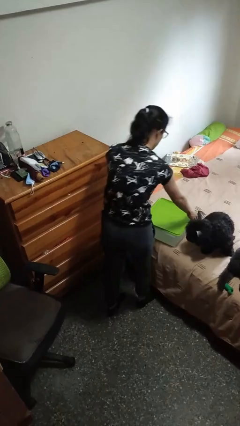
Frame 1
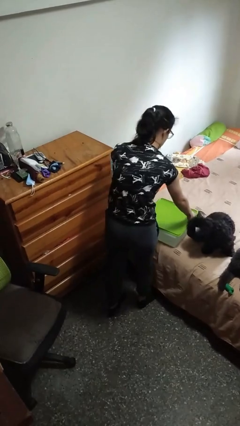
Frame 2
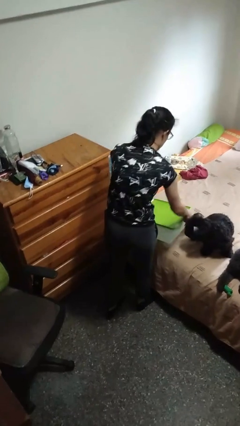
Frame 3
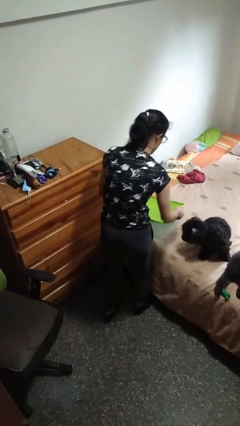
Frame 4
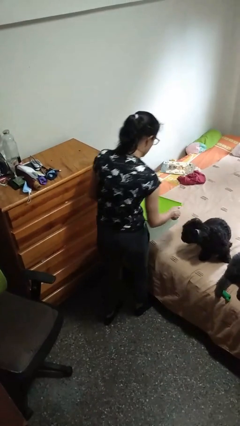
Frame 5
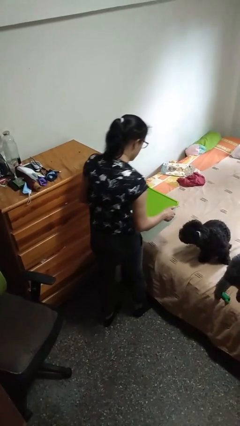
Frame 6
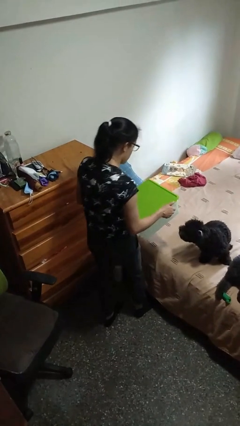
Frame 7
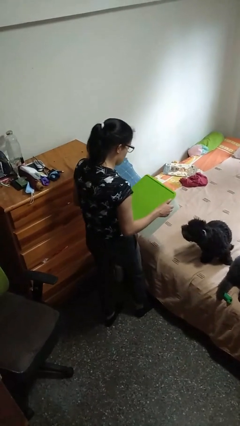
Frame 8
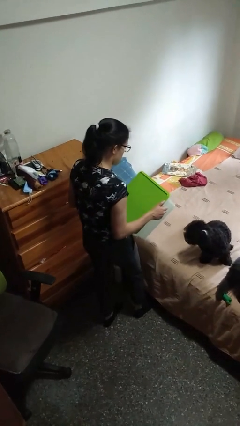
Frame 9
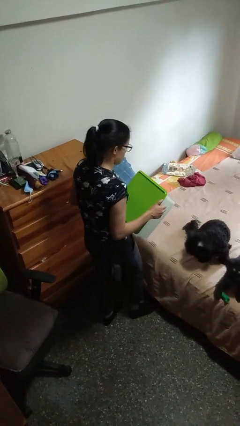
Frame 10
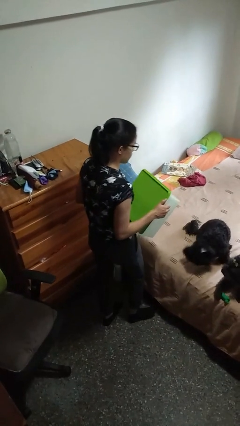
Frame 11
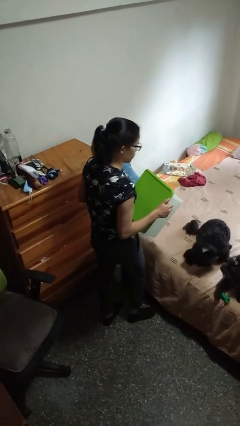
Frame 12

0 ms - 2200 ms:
person picks up object from bed

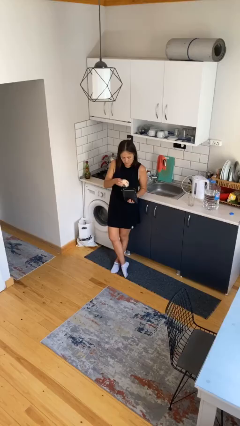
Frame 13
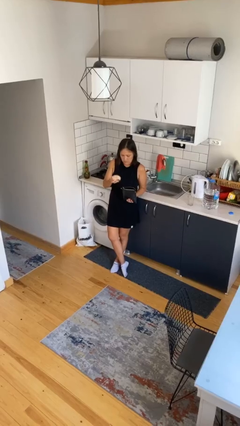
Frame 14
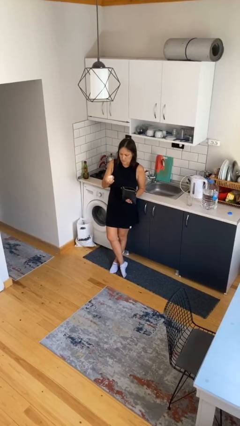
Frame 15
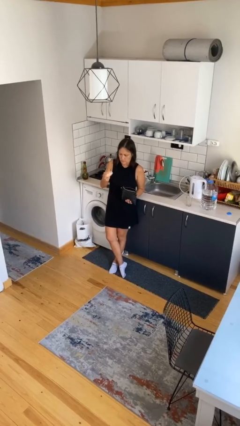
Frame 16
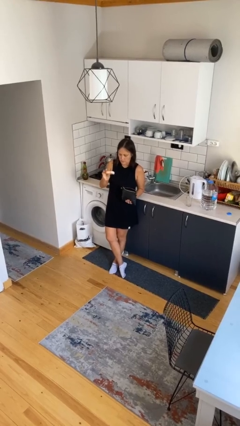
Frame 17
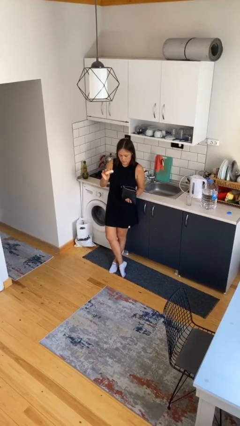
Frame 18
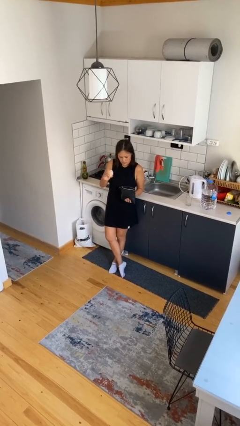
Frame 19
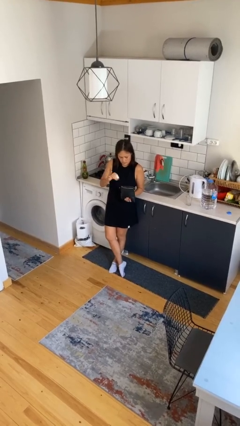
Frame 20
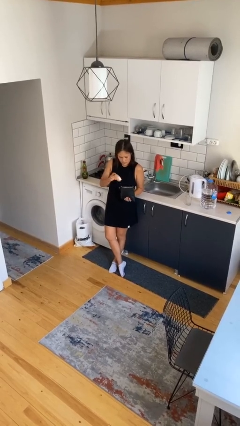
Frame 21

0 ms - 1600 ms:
person takes object from purse

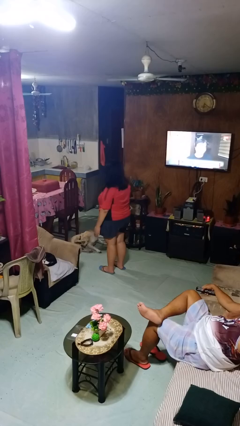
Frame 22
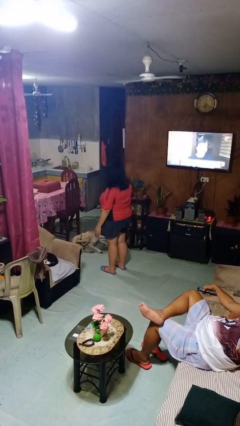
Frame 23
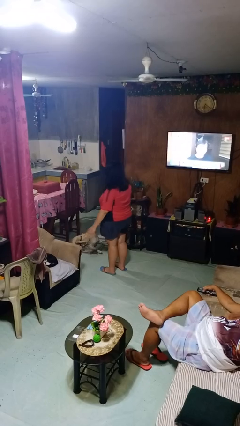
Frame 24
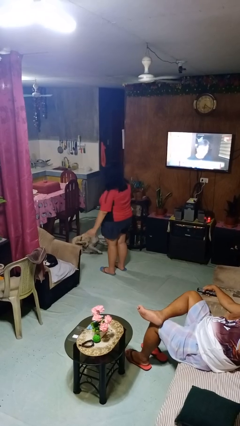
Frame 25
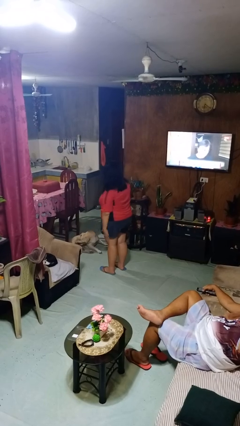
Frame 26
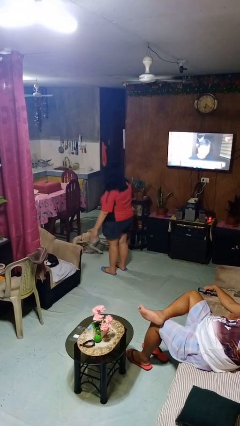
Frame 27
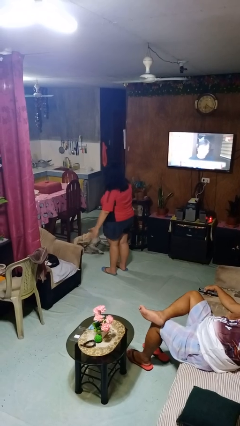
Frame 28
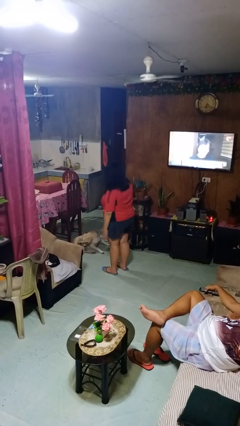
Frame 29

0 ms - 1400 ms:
person slaps hands on thighs

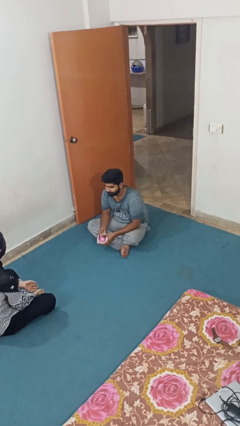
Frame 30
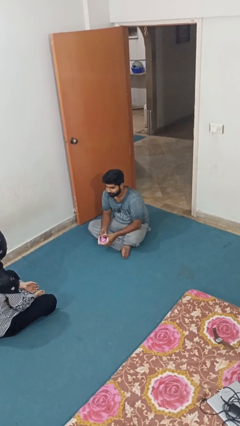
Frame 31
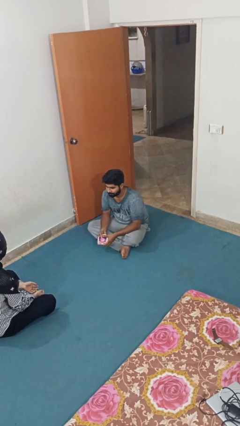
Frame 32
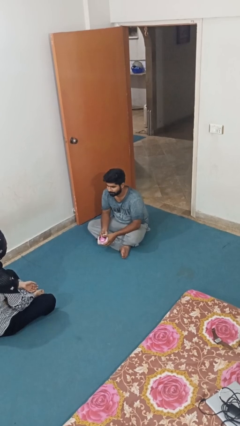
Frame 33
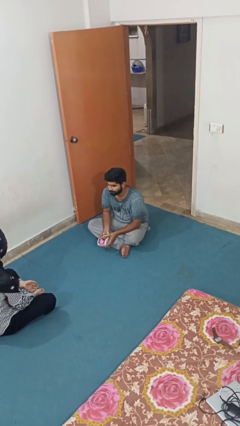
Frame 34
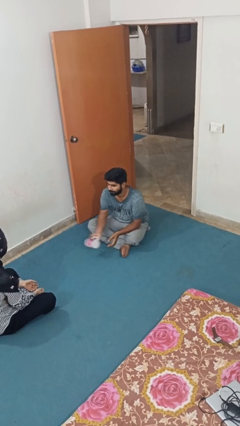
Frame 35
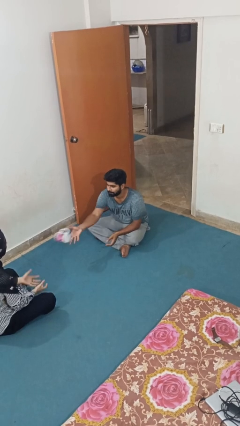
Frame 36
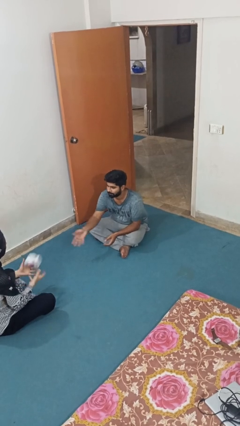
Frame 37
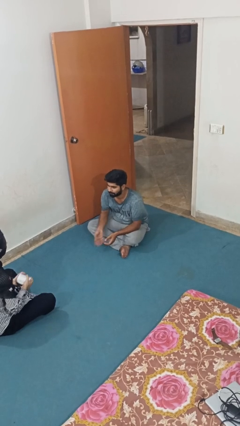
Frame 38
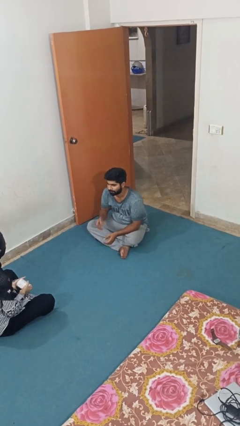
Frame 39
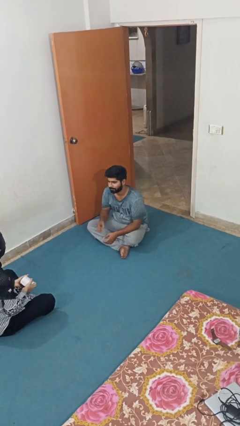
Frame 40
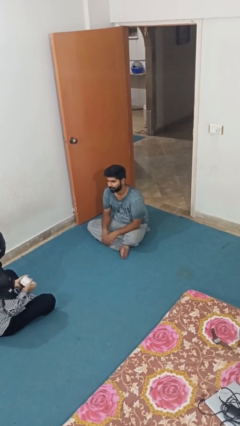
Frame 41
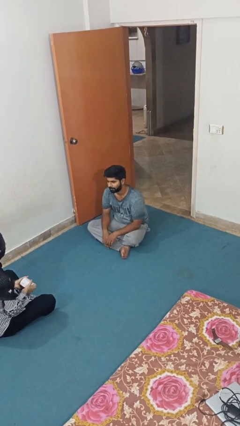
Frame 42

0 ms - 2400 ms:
person throws object to person

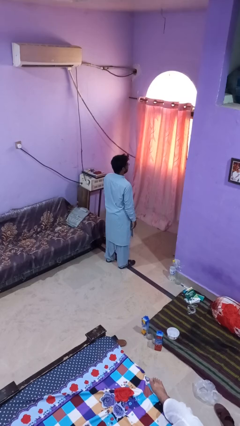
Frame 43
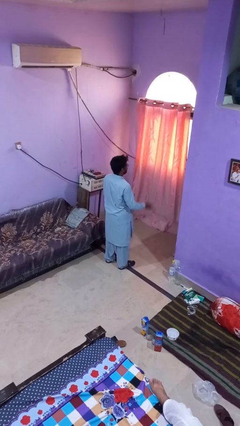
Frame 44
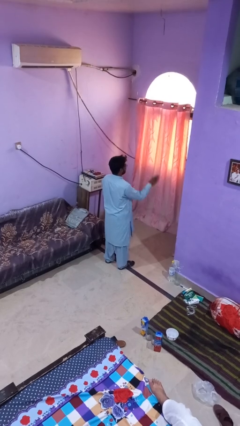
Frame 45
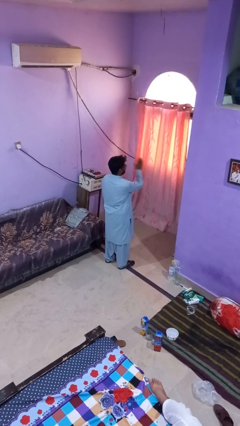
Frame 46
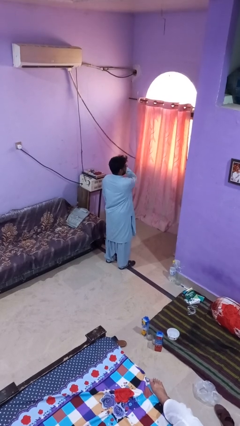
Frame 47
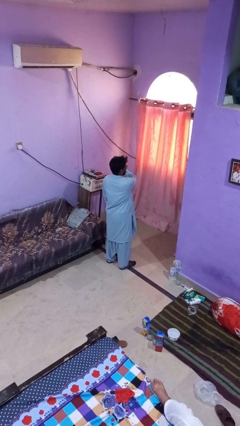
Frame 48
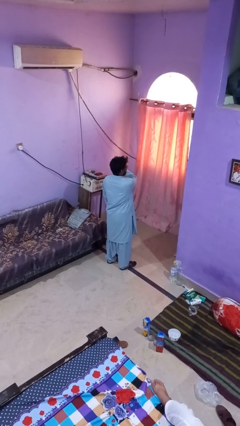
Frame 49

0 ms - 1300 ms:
person gestures swipe left

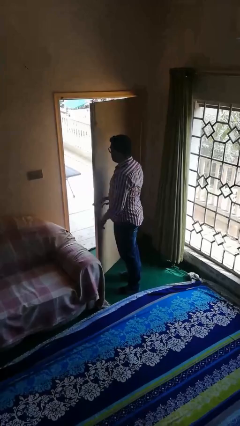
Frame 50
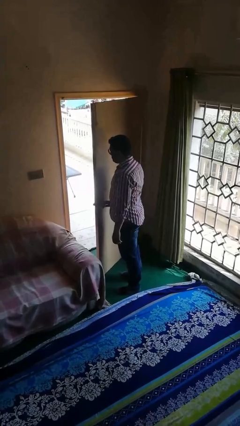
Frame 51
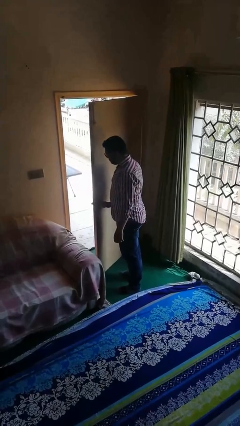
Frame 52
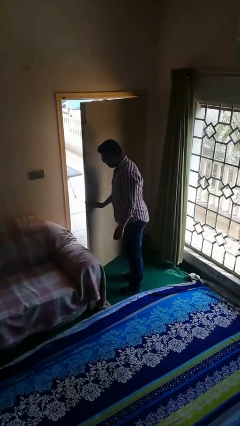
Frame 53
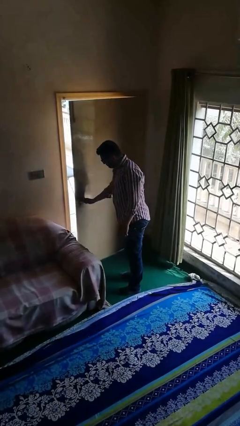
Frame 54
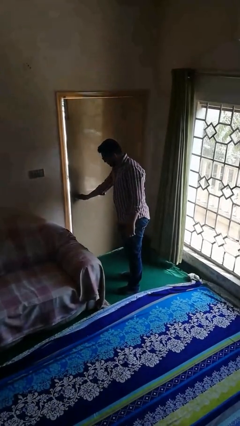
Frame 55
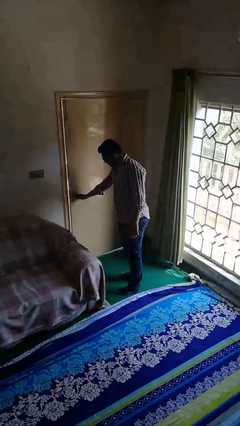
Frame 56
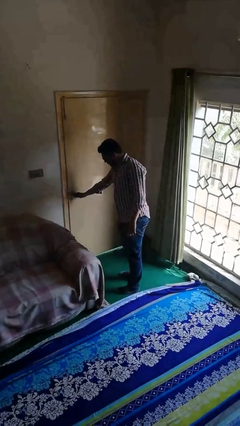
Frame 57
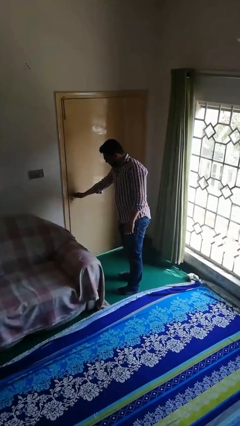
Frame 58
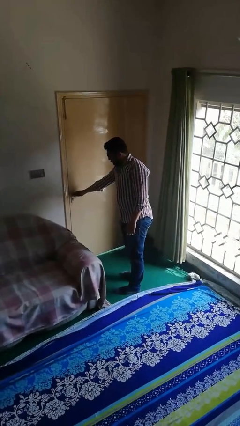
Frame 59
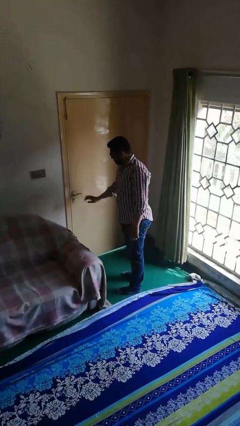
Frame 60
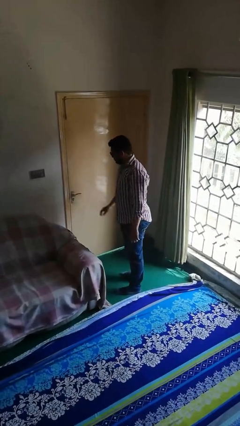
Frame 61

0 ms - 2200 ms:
person closes facility door

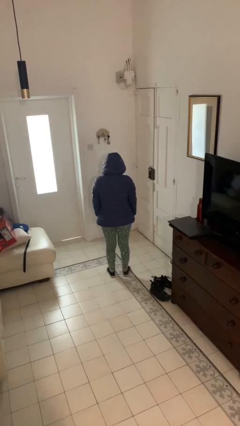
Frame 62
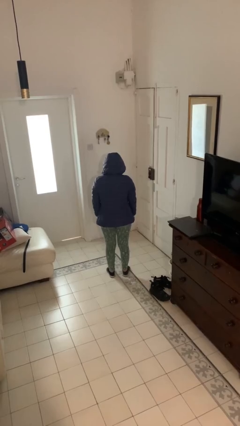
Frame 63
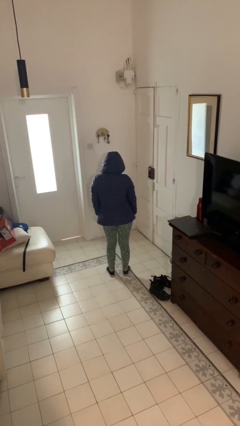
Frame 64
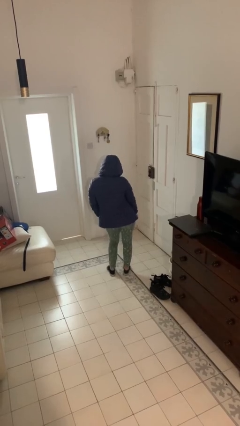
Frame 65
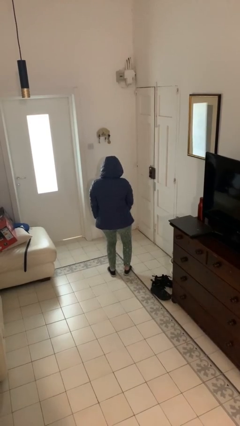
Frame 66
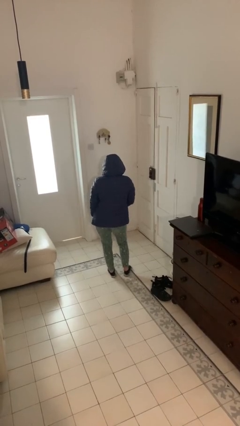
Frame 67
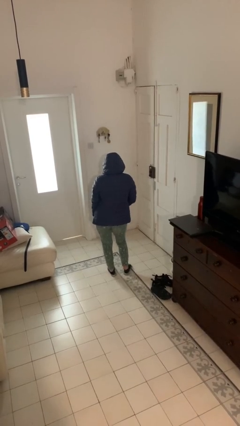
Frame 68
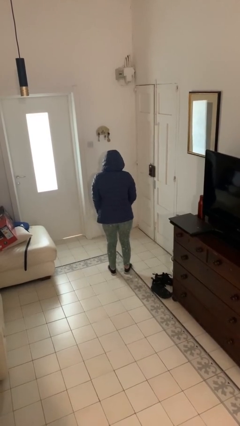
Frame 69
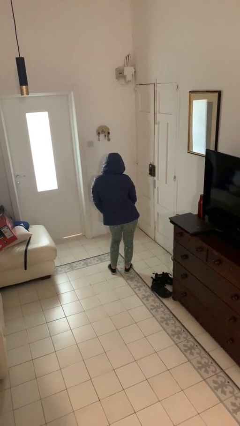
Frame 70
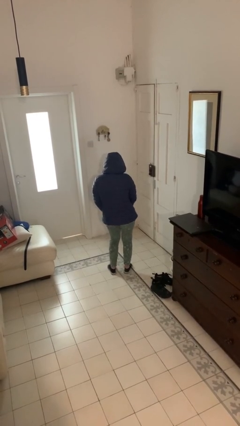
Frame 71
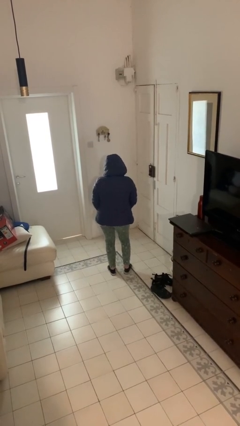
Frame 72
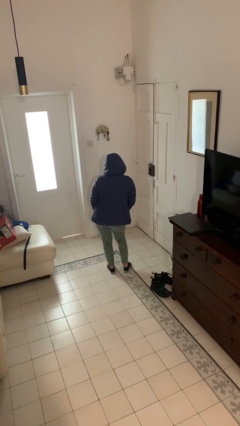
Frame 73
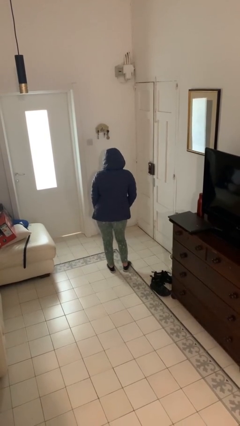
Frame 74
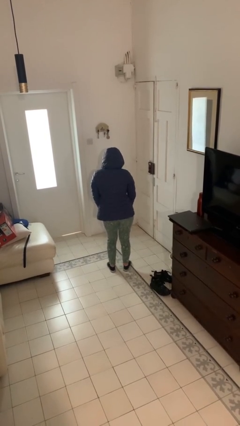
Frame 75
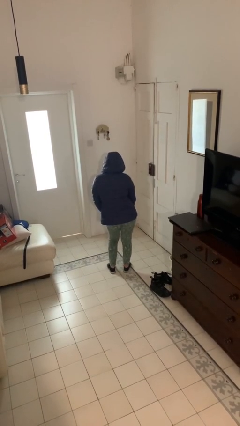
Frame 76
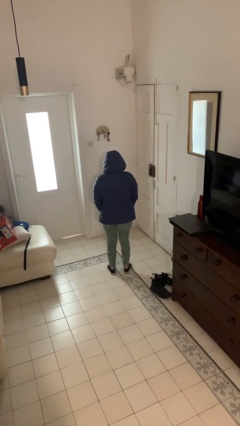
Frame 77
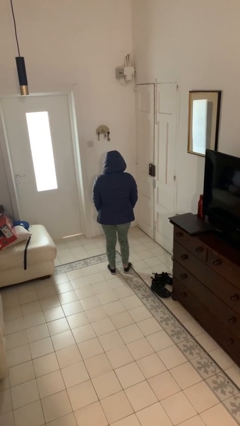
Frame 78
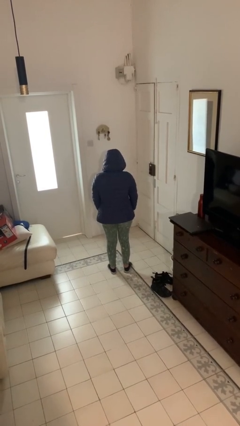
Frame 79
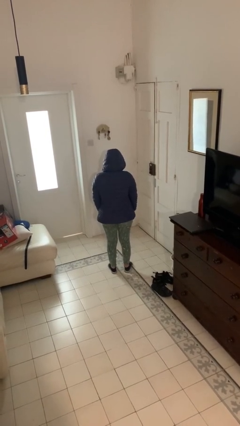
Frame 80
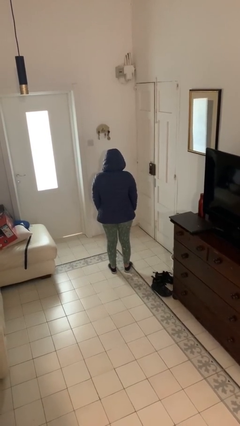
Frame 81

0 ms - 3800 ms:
person dances in place

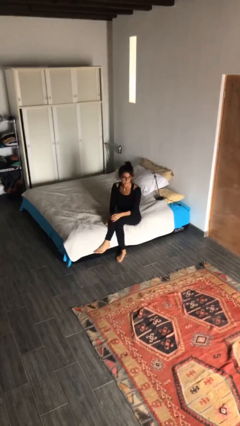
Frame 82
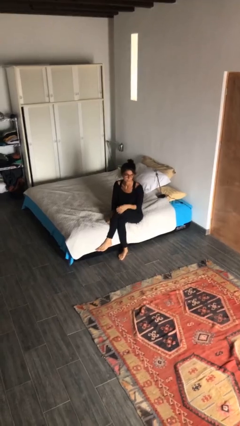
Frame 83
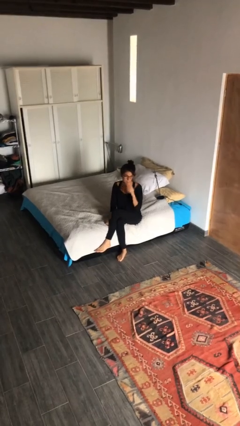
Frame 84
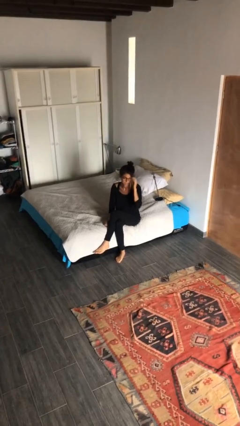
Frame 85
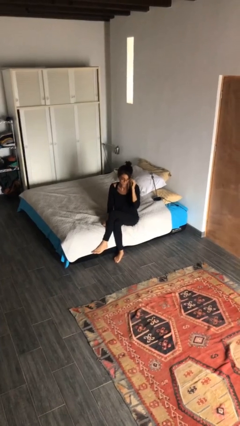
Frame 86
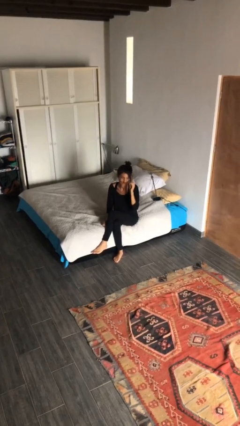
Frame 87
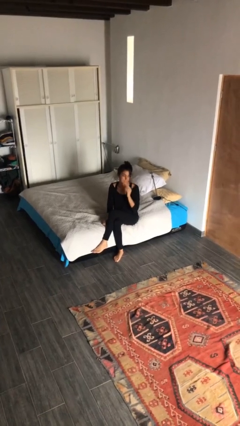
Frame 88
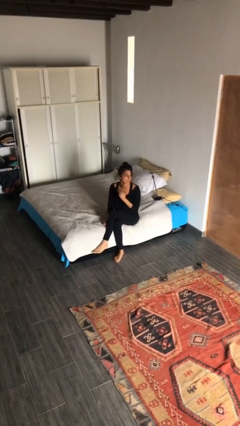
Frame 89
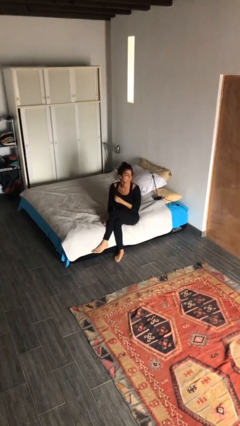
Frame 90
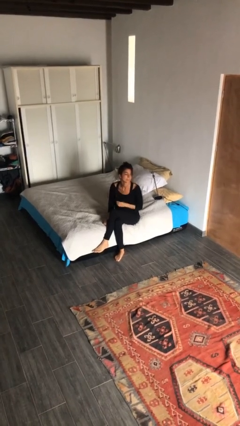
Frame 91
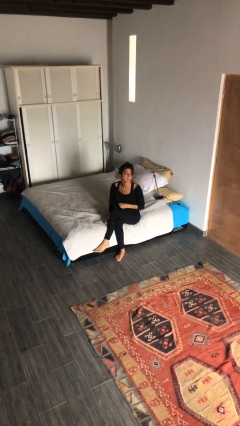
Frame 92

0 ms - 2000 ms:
person takes off glasses
